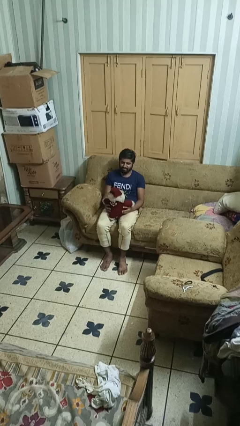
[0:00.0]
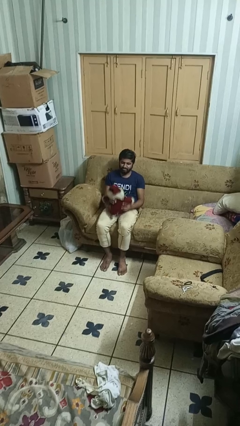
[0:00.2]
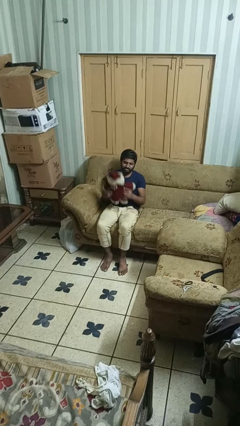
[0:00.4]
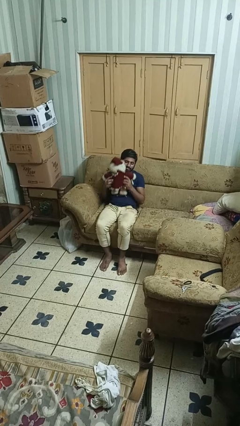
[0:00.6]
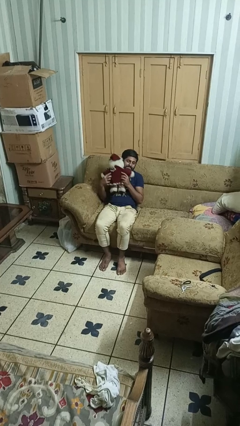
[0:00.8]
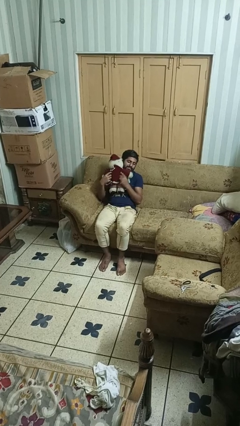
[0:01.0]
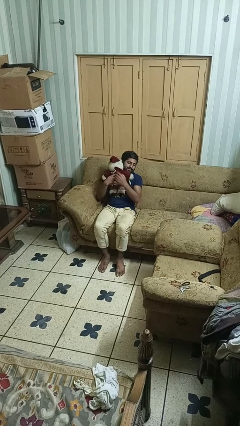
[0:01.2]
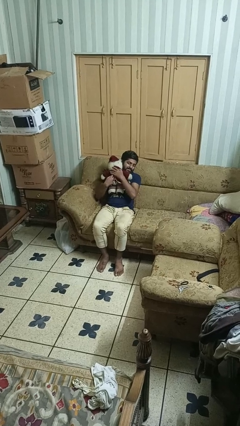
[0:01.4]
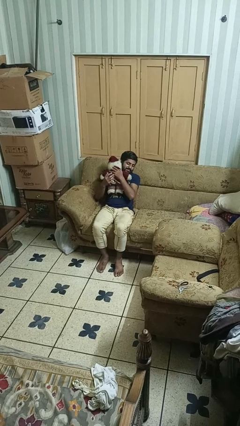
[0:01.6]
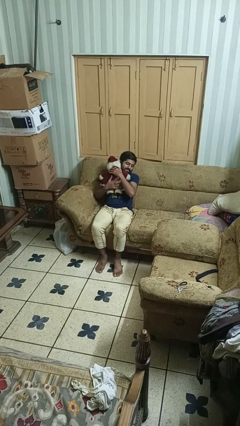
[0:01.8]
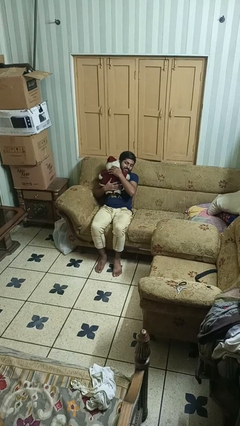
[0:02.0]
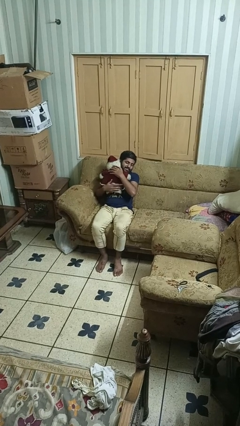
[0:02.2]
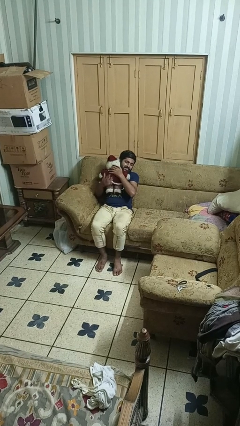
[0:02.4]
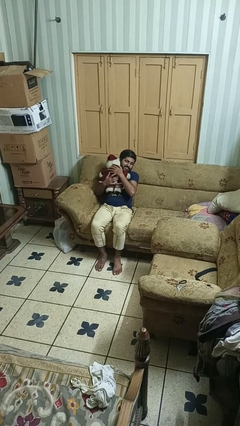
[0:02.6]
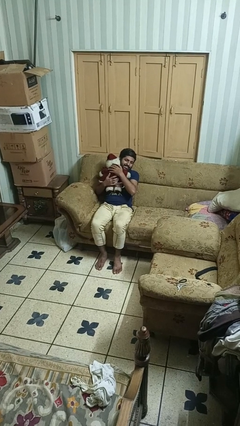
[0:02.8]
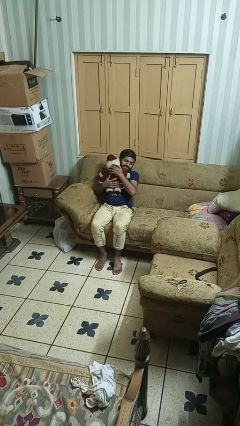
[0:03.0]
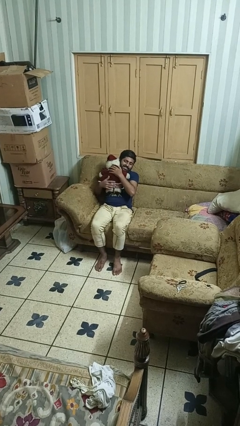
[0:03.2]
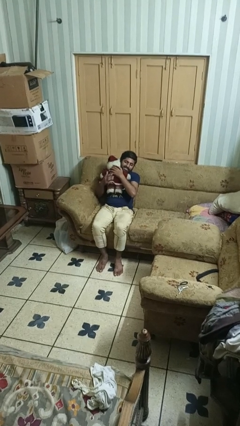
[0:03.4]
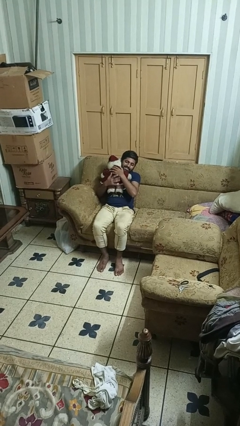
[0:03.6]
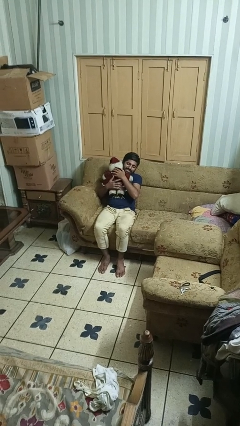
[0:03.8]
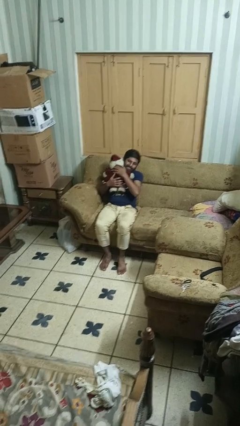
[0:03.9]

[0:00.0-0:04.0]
person hugs stuffed animal

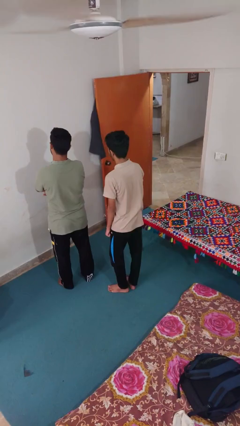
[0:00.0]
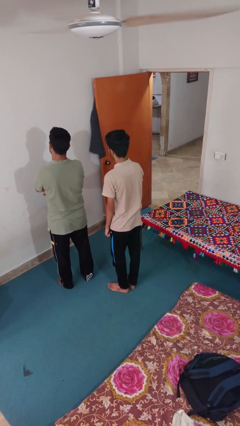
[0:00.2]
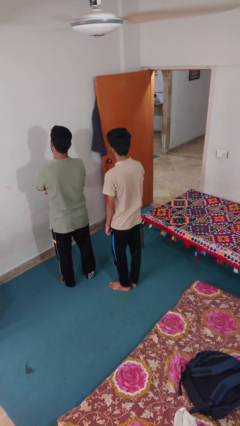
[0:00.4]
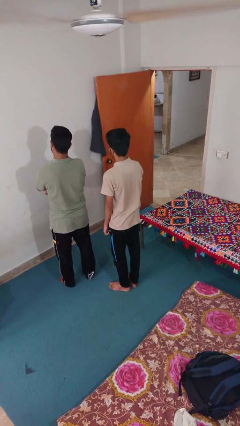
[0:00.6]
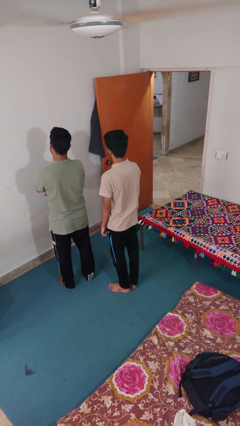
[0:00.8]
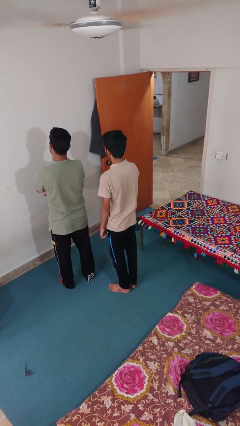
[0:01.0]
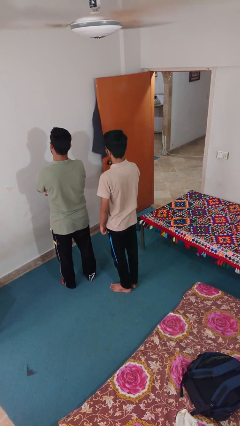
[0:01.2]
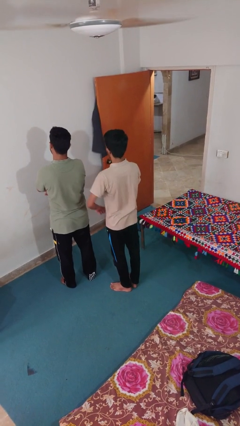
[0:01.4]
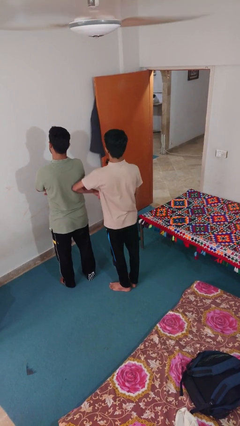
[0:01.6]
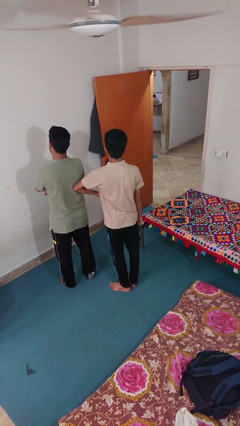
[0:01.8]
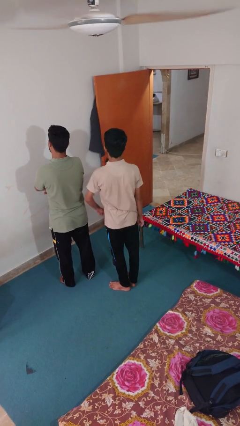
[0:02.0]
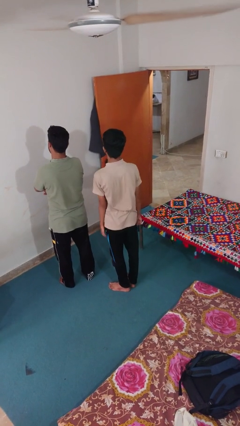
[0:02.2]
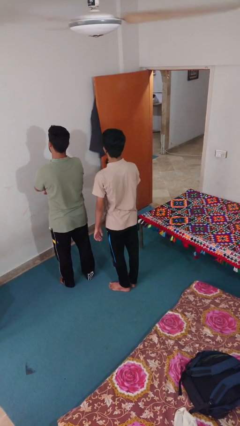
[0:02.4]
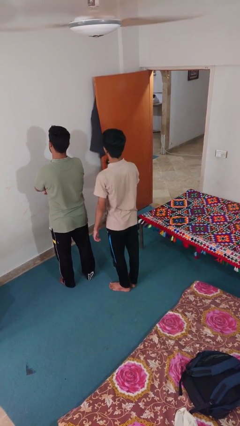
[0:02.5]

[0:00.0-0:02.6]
person nudges person with elbow

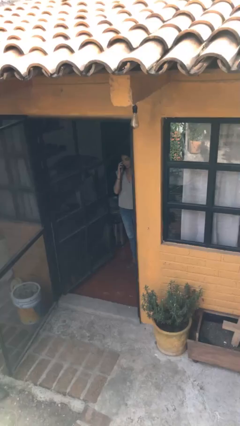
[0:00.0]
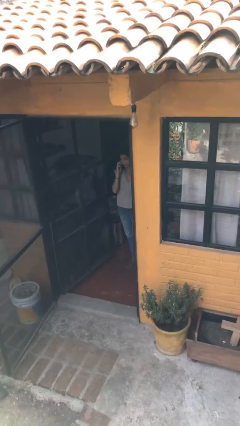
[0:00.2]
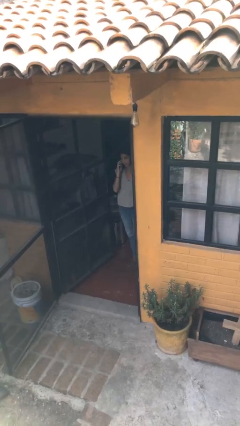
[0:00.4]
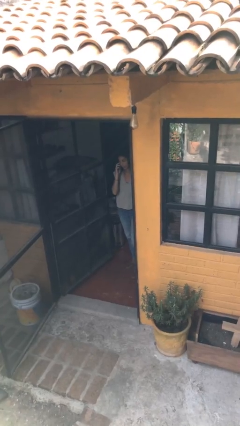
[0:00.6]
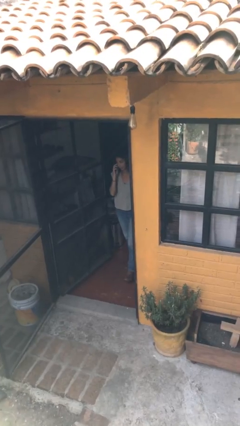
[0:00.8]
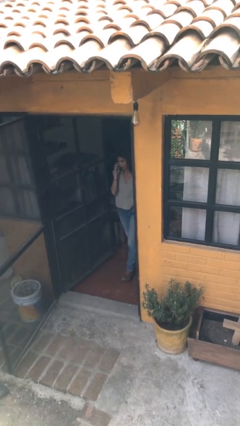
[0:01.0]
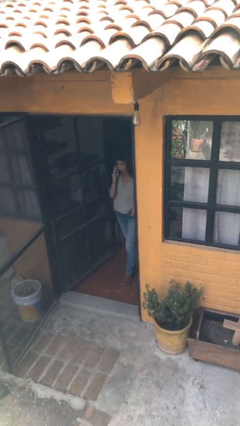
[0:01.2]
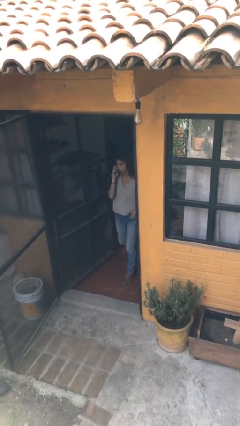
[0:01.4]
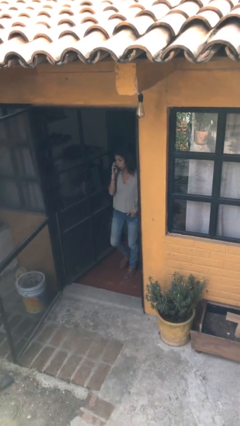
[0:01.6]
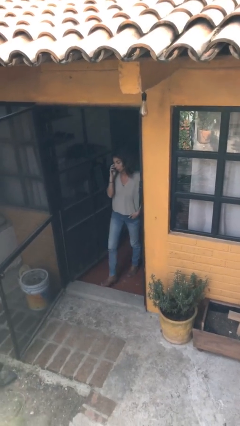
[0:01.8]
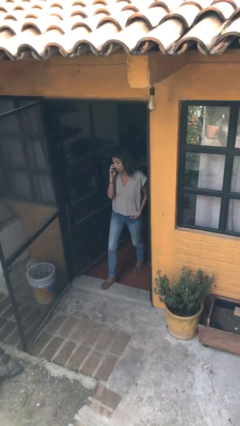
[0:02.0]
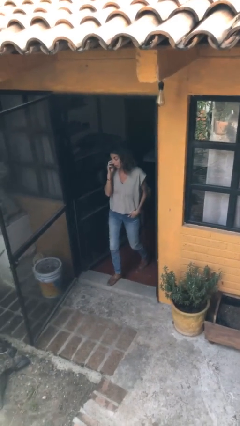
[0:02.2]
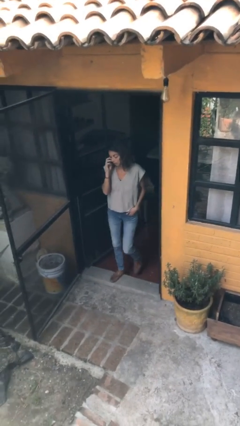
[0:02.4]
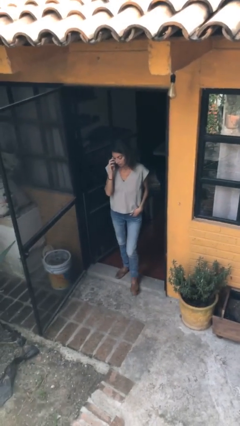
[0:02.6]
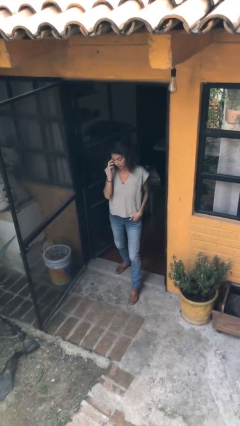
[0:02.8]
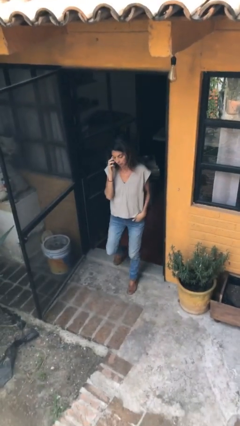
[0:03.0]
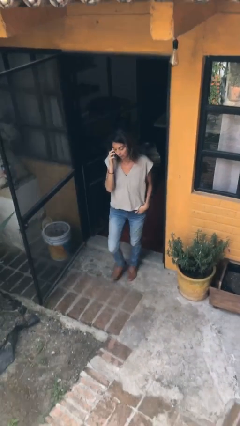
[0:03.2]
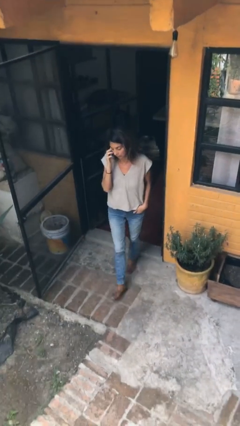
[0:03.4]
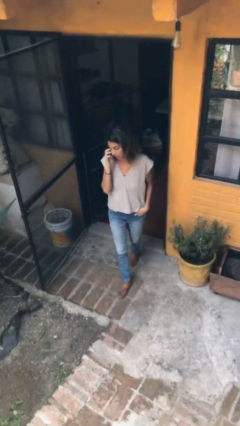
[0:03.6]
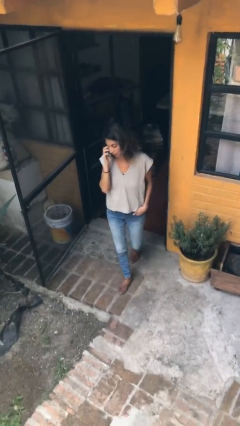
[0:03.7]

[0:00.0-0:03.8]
person enters scene through structure

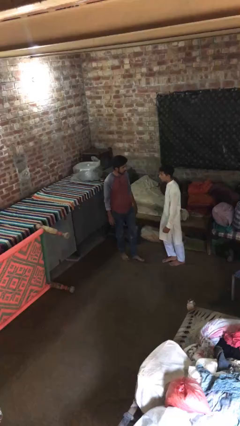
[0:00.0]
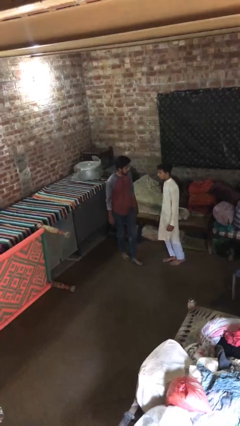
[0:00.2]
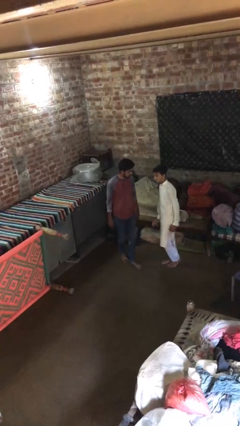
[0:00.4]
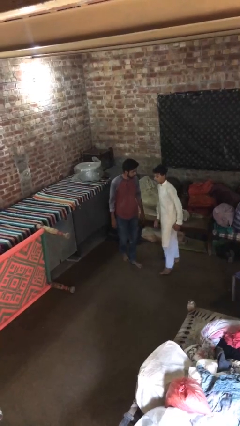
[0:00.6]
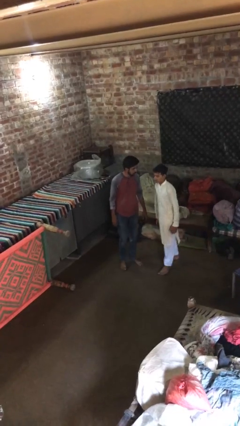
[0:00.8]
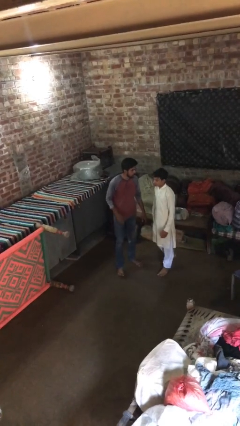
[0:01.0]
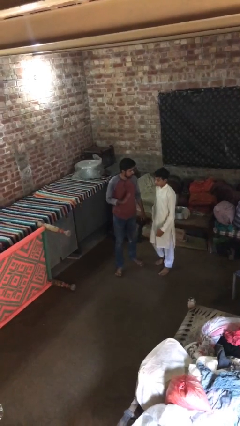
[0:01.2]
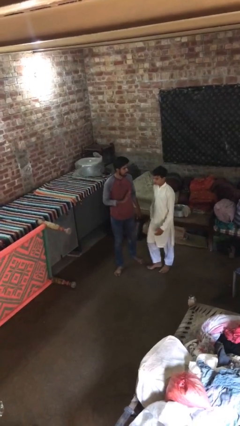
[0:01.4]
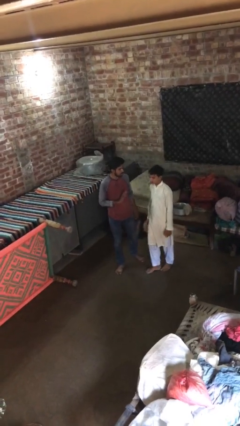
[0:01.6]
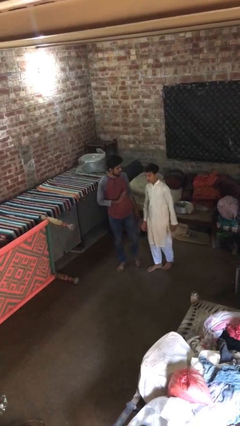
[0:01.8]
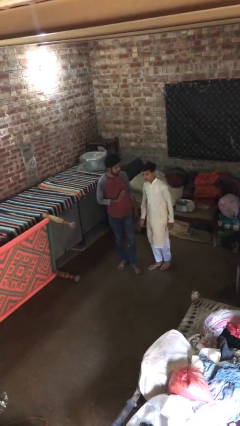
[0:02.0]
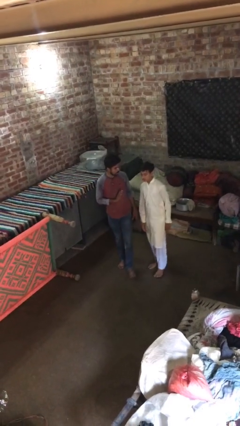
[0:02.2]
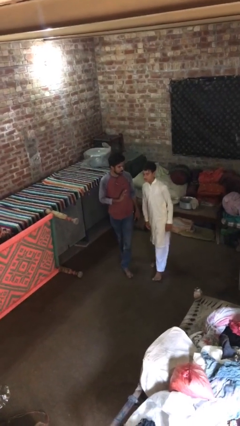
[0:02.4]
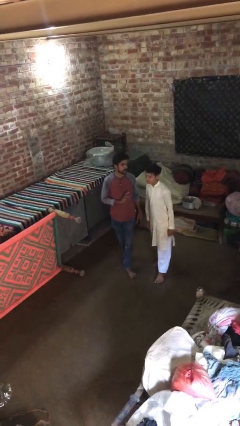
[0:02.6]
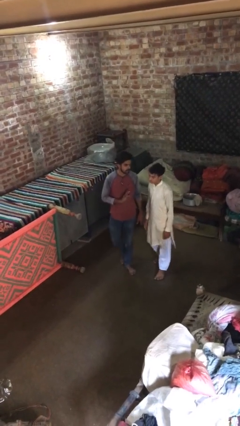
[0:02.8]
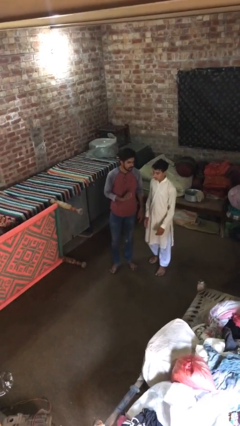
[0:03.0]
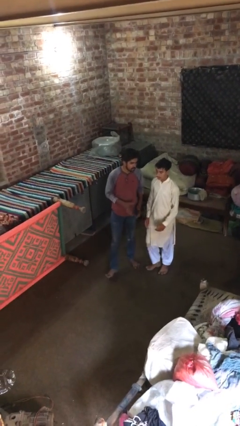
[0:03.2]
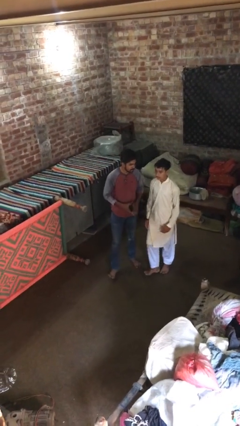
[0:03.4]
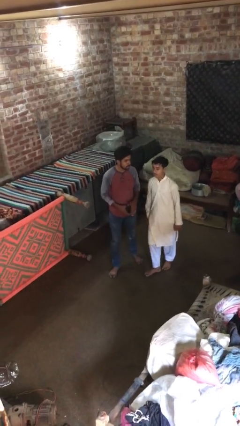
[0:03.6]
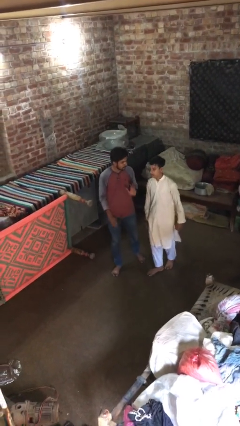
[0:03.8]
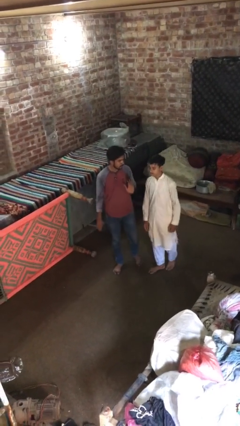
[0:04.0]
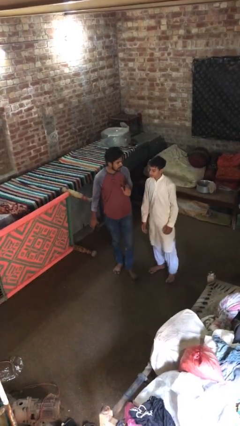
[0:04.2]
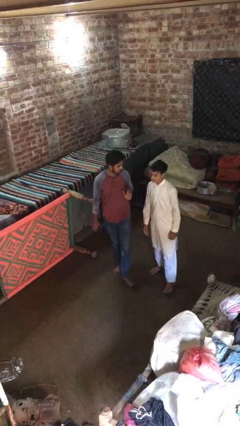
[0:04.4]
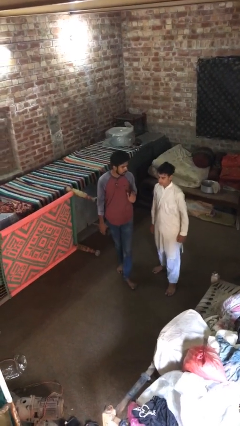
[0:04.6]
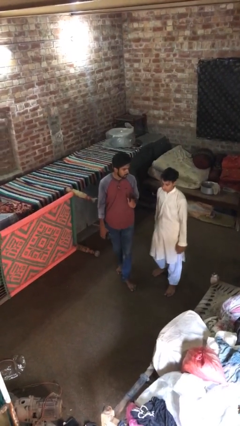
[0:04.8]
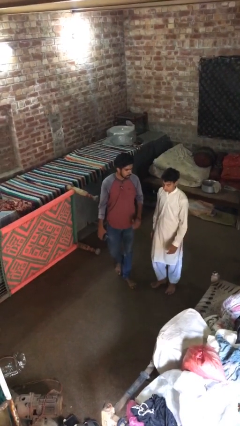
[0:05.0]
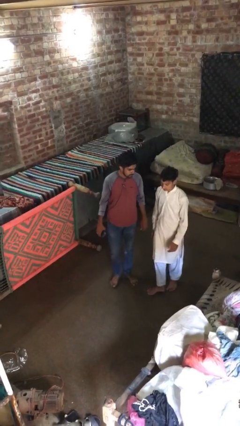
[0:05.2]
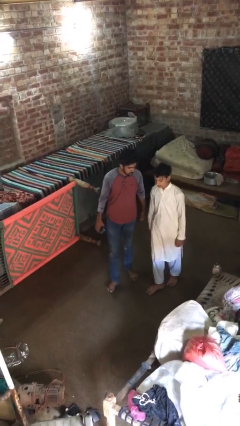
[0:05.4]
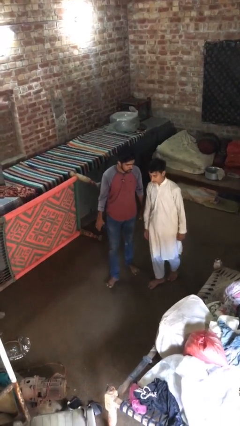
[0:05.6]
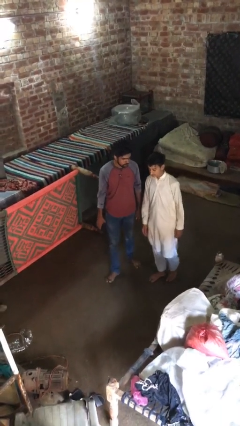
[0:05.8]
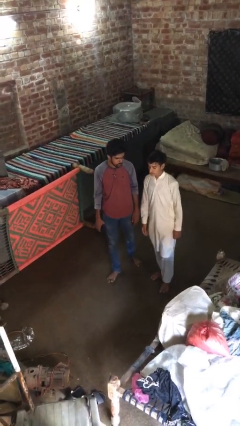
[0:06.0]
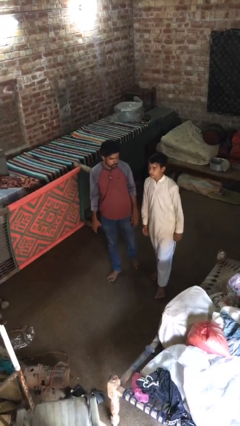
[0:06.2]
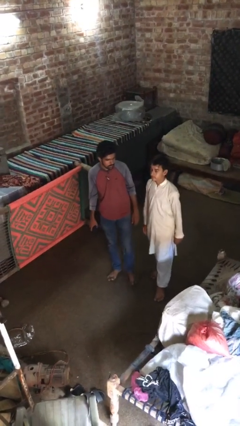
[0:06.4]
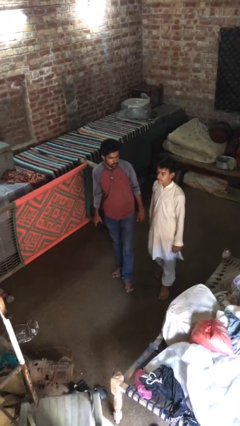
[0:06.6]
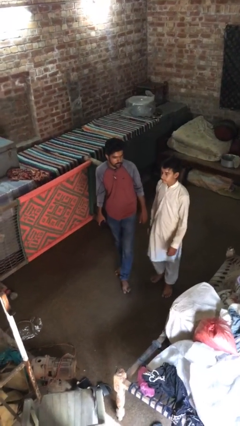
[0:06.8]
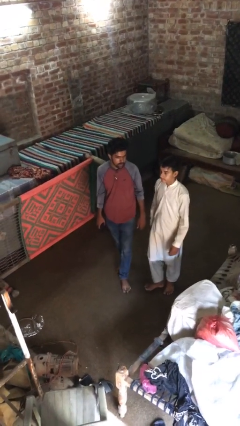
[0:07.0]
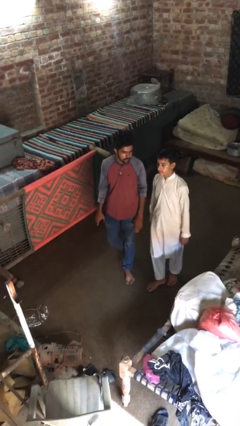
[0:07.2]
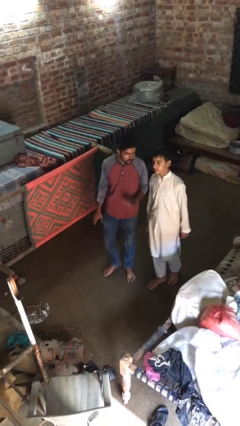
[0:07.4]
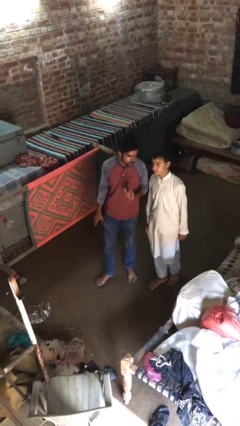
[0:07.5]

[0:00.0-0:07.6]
person talks to person
